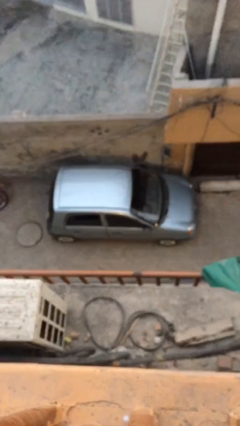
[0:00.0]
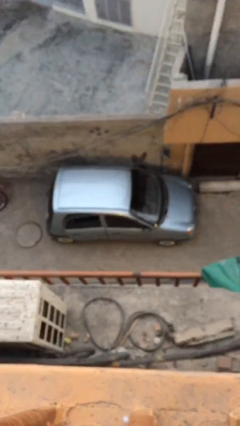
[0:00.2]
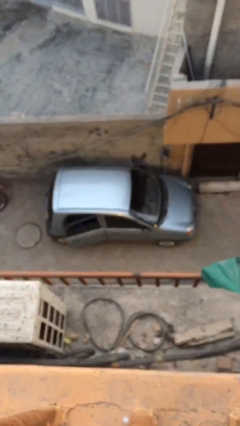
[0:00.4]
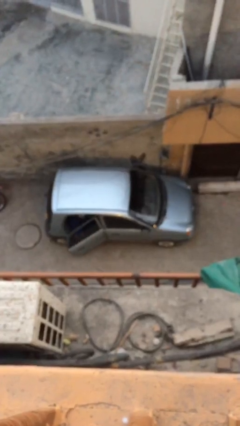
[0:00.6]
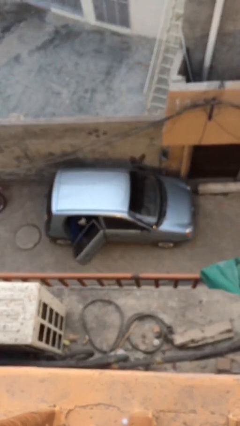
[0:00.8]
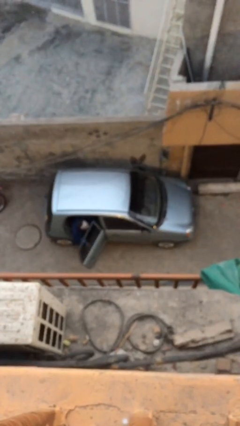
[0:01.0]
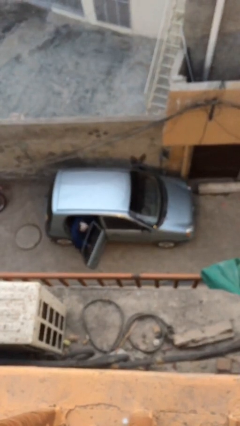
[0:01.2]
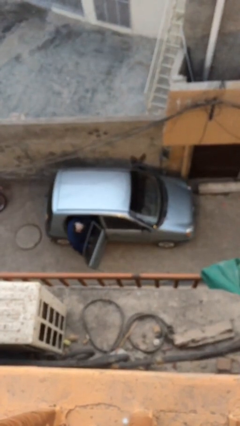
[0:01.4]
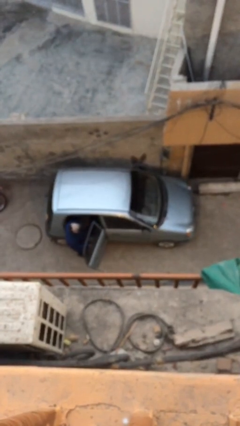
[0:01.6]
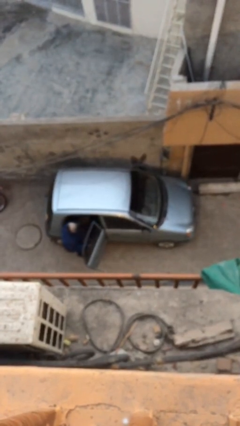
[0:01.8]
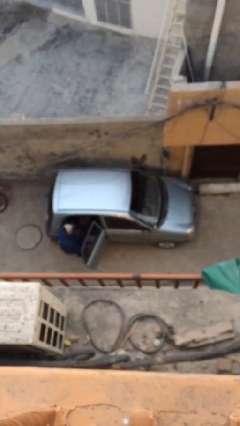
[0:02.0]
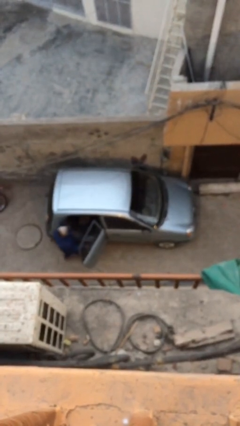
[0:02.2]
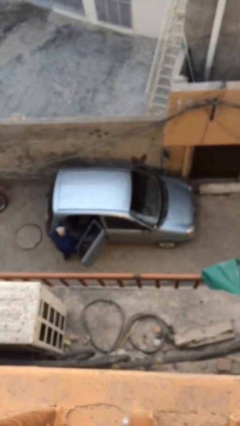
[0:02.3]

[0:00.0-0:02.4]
car drops off person

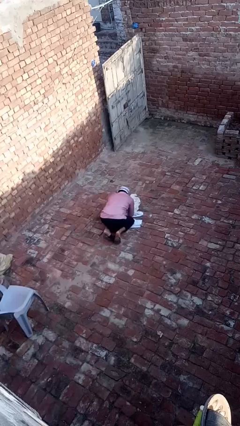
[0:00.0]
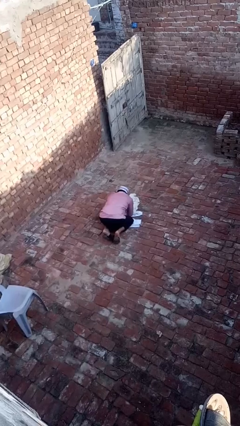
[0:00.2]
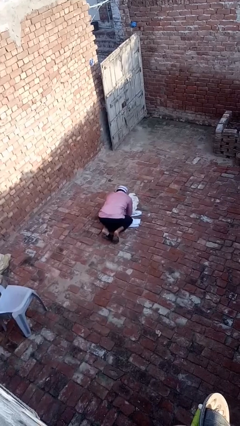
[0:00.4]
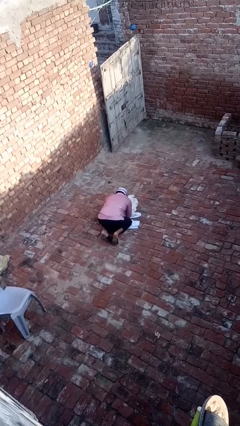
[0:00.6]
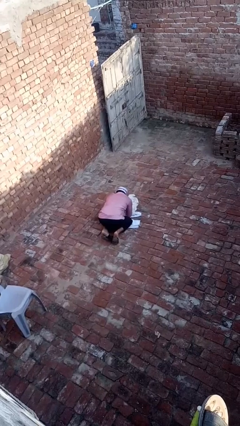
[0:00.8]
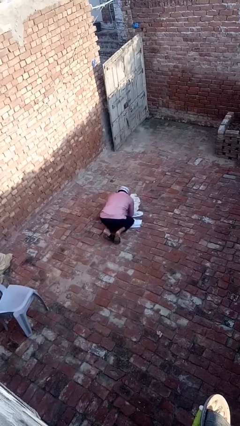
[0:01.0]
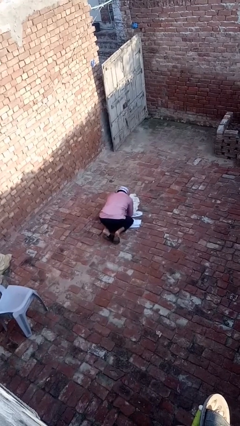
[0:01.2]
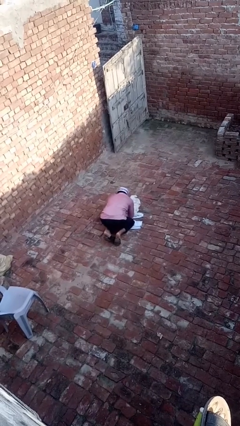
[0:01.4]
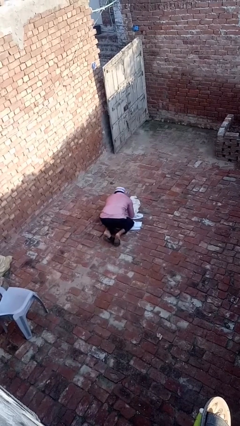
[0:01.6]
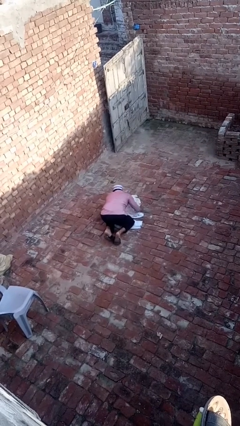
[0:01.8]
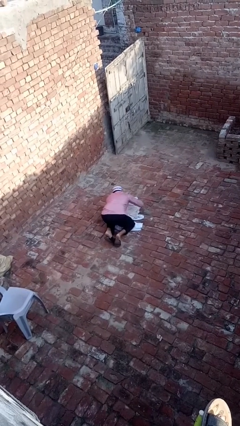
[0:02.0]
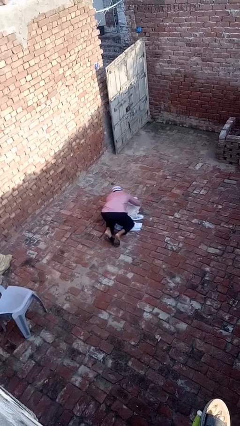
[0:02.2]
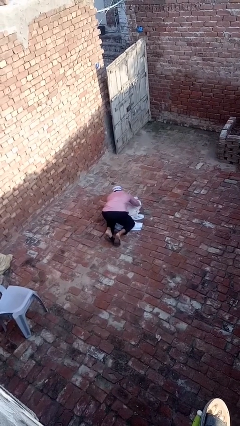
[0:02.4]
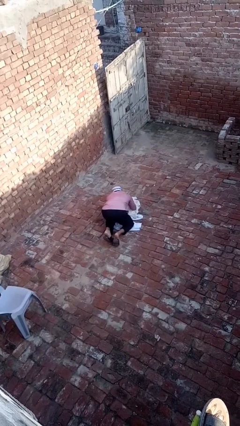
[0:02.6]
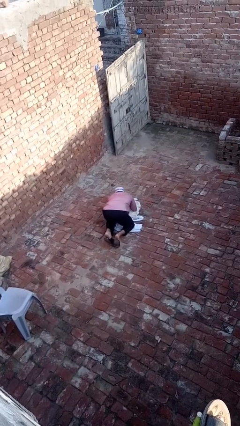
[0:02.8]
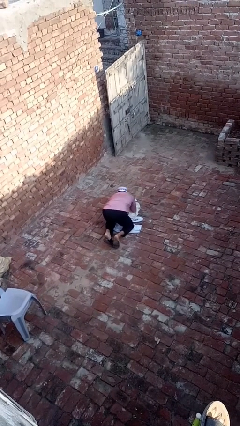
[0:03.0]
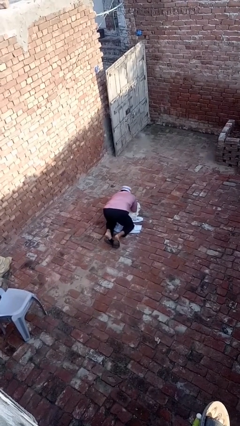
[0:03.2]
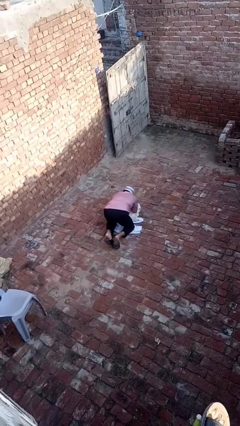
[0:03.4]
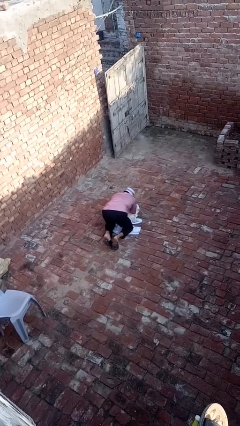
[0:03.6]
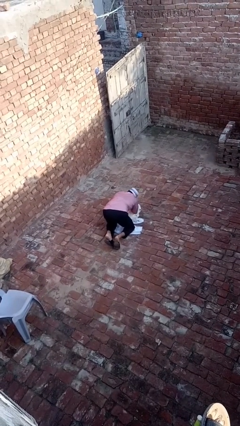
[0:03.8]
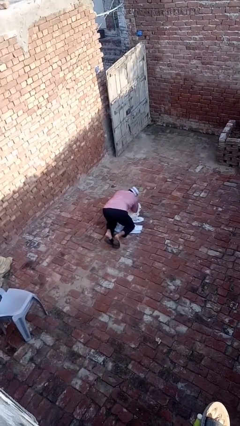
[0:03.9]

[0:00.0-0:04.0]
person crawls

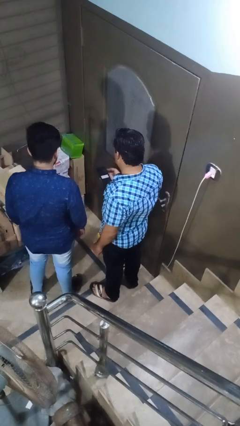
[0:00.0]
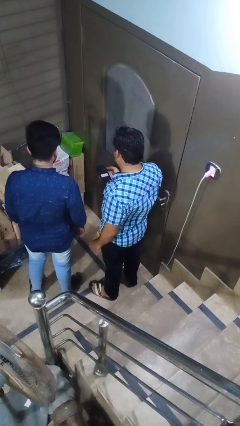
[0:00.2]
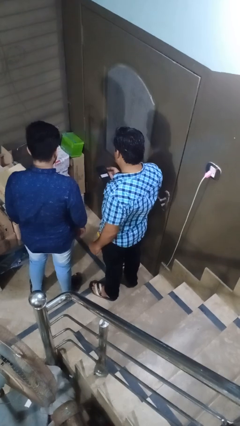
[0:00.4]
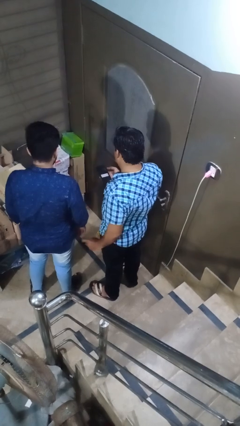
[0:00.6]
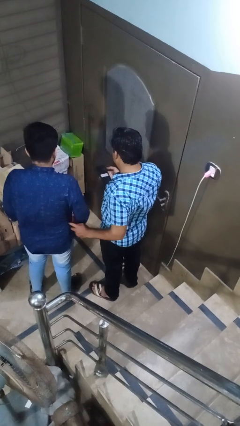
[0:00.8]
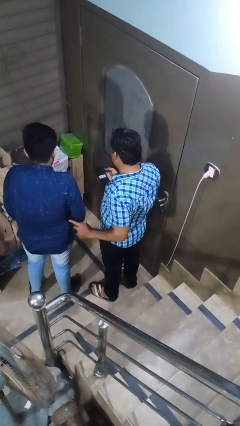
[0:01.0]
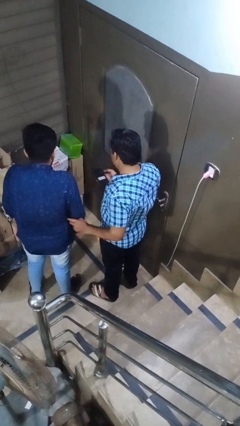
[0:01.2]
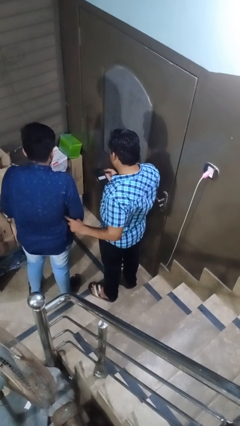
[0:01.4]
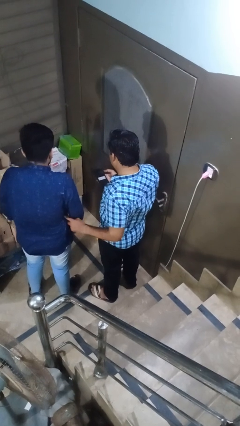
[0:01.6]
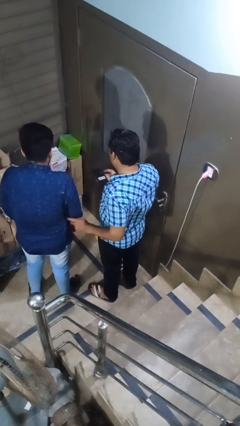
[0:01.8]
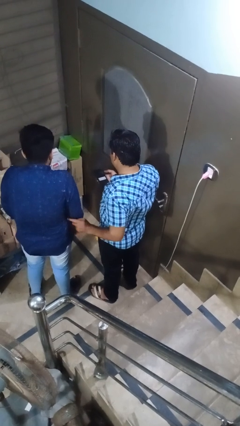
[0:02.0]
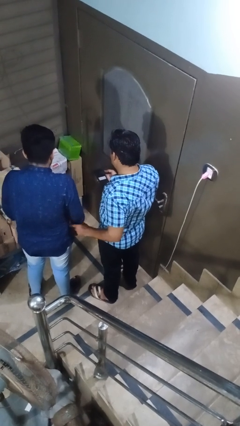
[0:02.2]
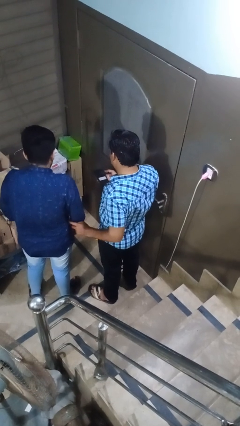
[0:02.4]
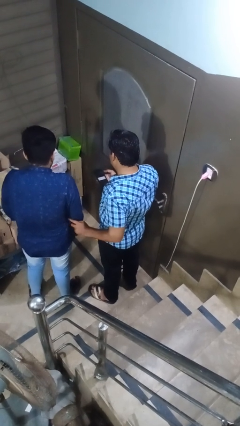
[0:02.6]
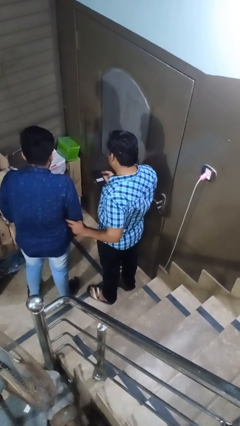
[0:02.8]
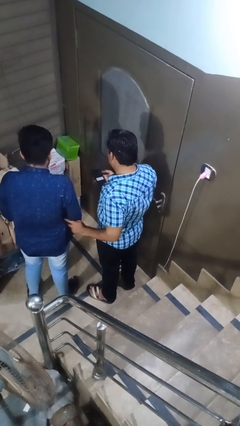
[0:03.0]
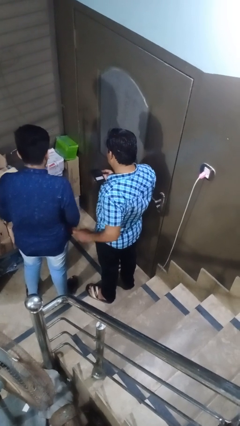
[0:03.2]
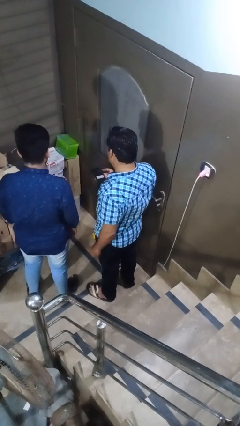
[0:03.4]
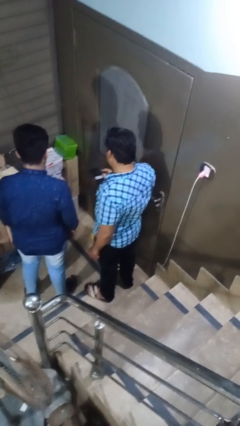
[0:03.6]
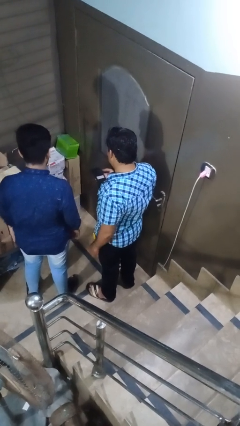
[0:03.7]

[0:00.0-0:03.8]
person tickles person

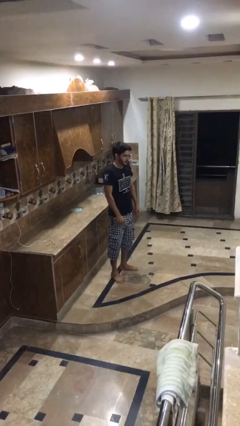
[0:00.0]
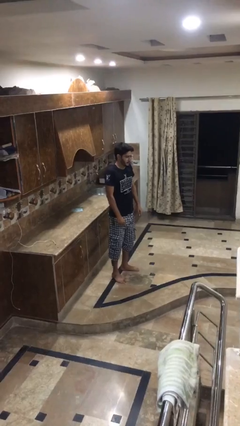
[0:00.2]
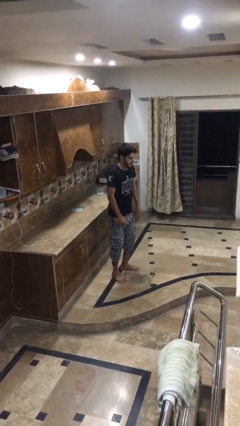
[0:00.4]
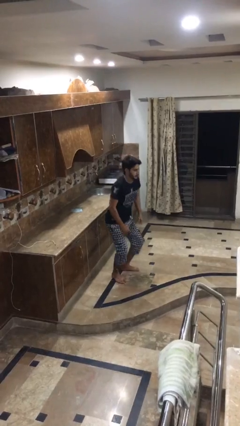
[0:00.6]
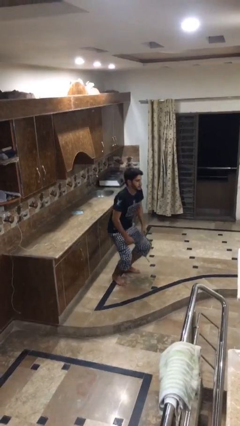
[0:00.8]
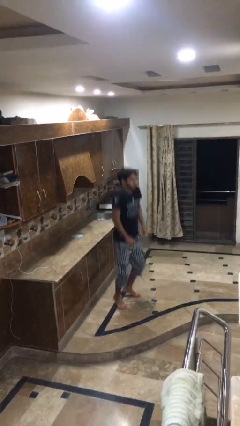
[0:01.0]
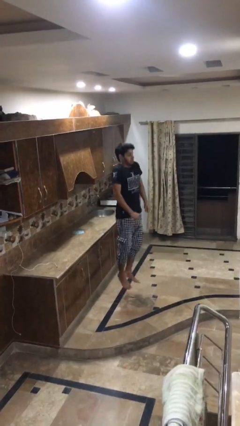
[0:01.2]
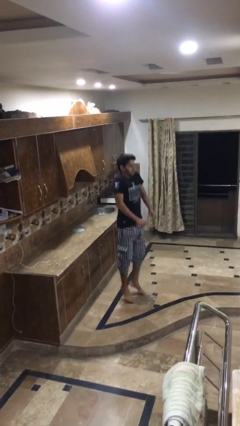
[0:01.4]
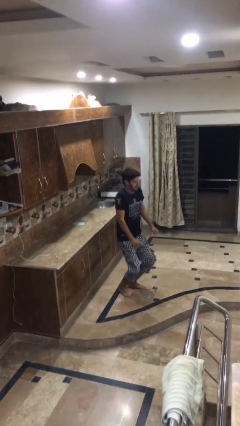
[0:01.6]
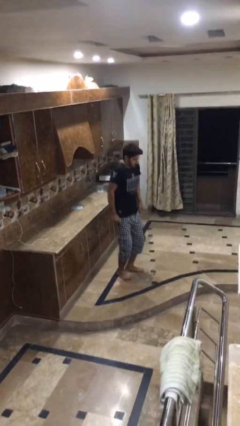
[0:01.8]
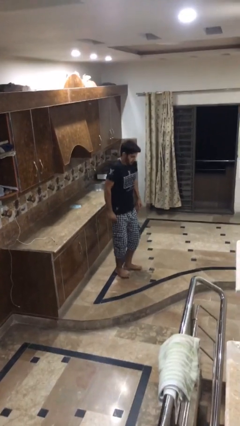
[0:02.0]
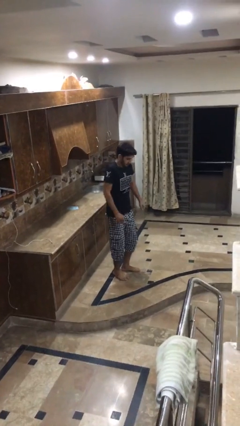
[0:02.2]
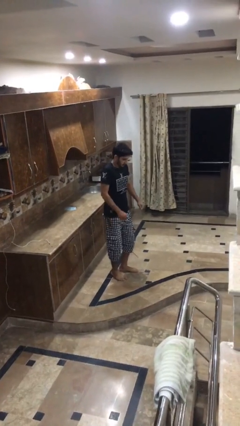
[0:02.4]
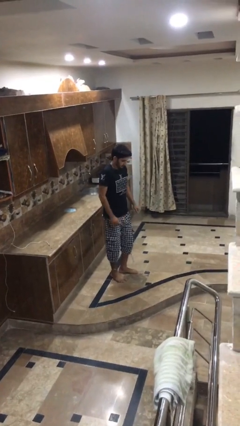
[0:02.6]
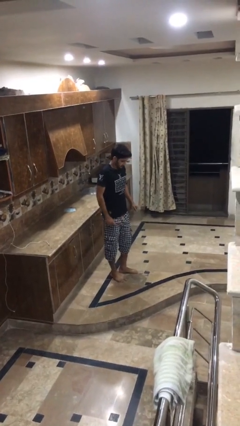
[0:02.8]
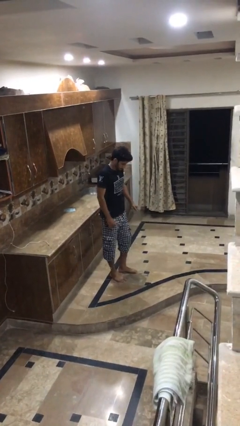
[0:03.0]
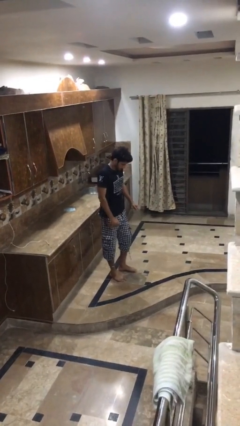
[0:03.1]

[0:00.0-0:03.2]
person jumps

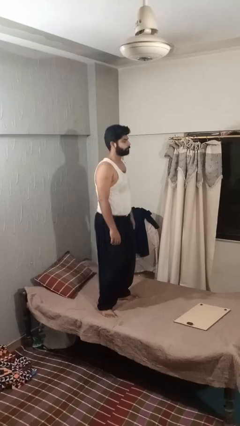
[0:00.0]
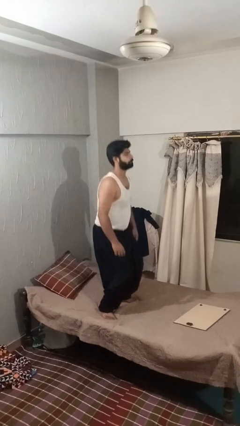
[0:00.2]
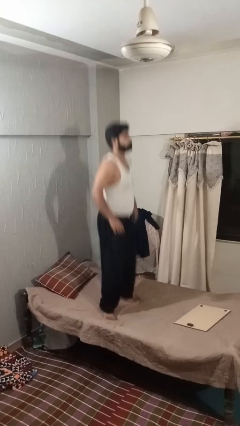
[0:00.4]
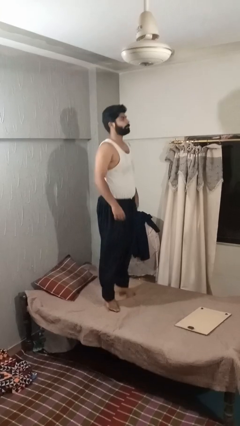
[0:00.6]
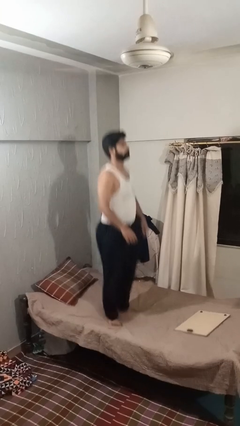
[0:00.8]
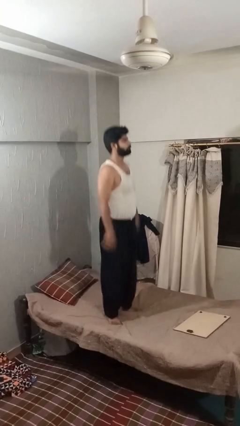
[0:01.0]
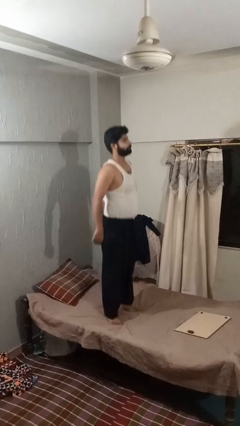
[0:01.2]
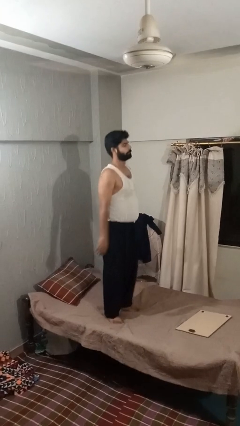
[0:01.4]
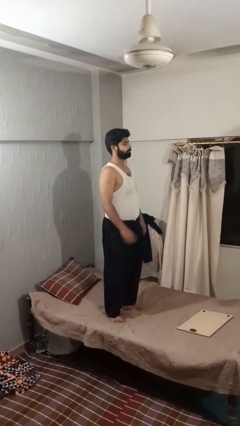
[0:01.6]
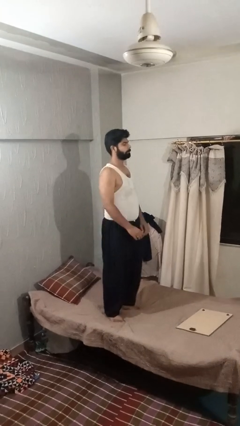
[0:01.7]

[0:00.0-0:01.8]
person jumps on bed

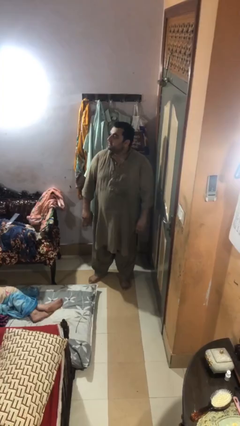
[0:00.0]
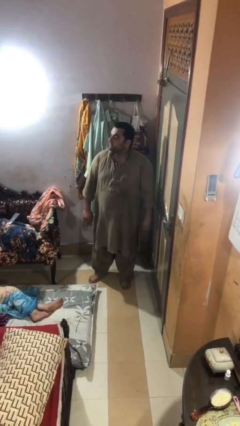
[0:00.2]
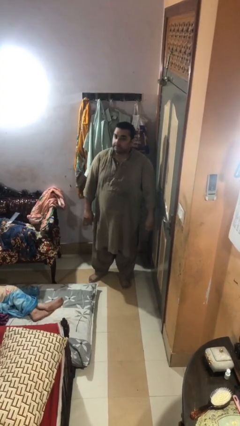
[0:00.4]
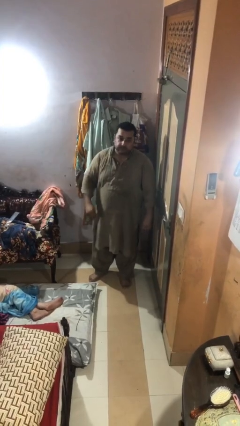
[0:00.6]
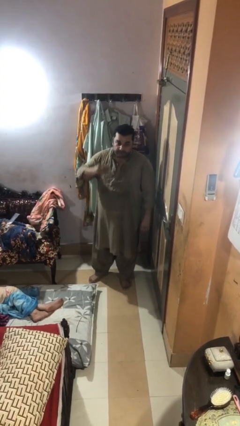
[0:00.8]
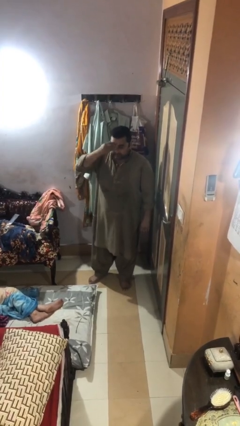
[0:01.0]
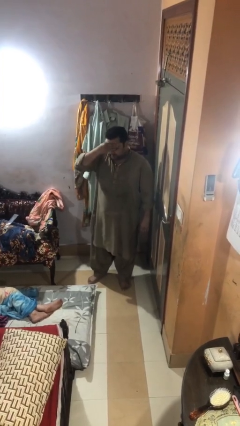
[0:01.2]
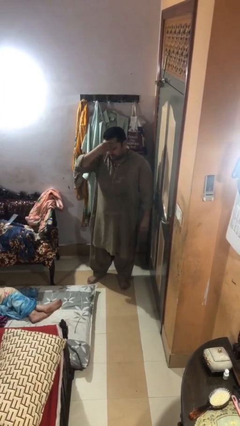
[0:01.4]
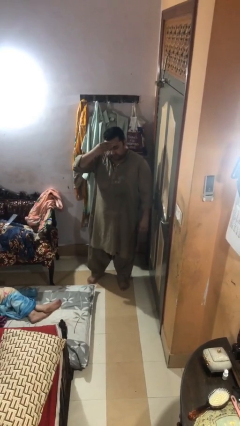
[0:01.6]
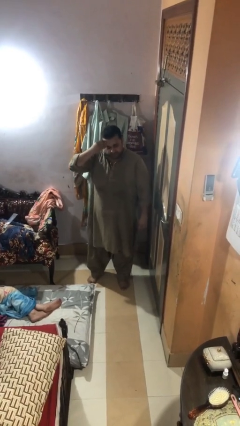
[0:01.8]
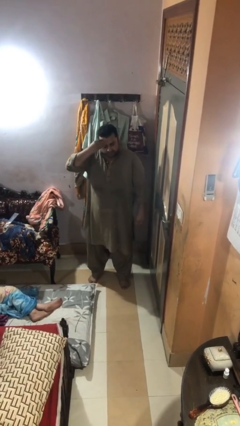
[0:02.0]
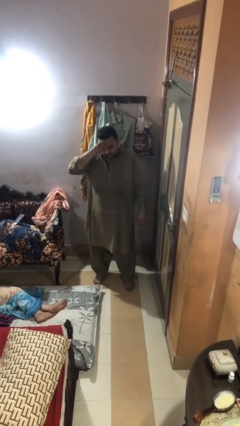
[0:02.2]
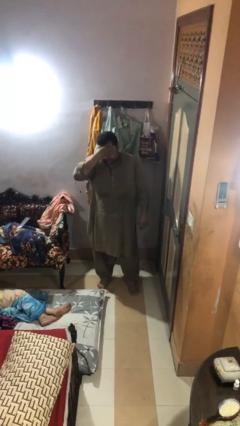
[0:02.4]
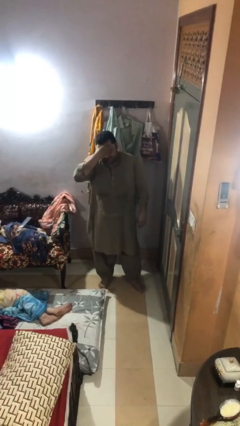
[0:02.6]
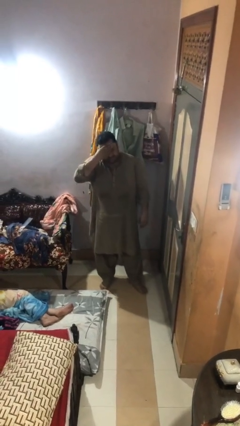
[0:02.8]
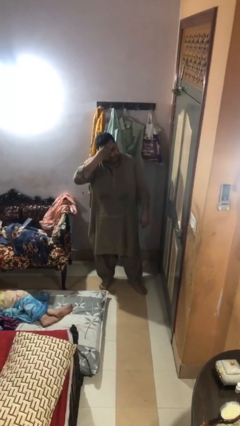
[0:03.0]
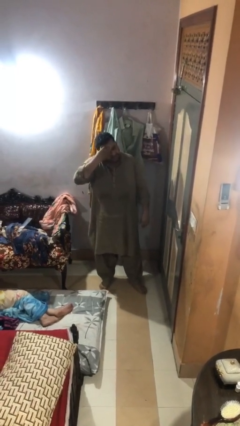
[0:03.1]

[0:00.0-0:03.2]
person scratches face
